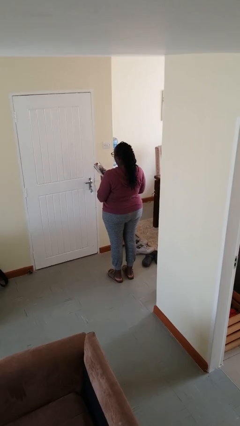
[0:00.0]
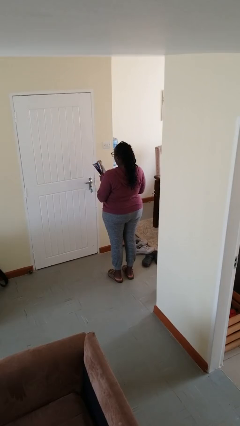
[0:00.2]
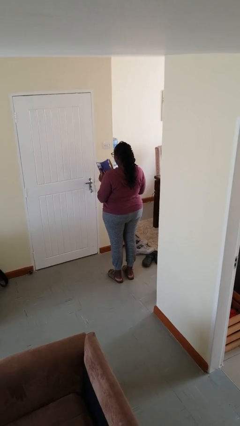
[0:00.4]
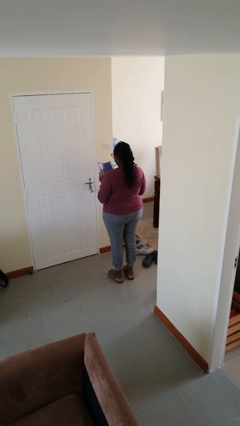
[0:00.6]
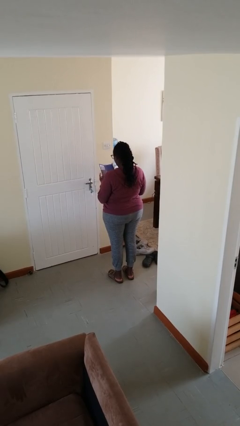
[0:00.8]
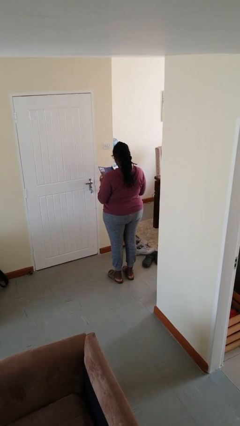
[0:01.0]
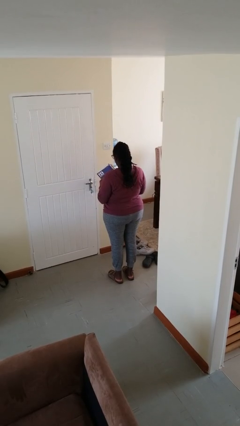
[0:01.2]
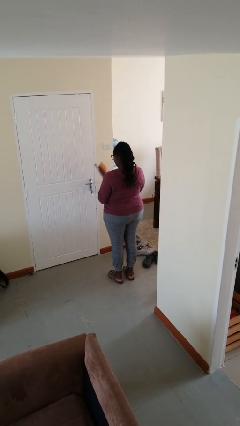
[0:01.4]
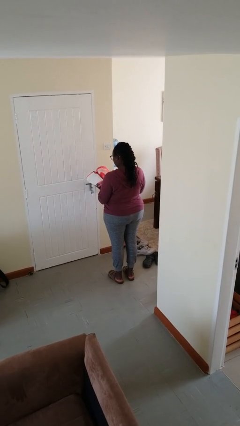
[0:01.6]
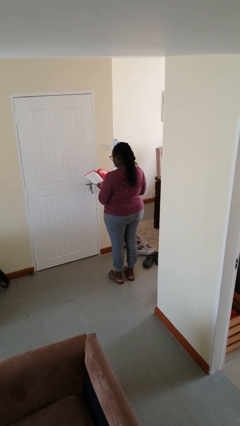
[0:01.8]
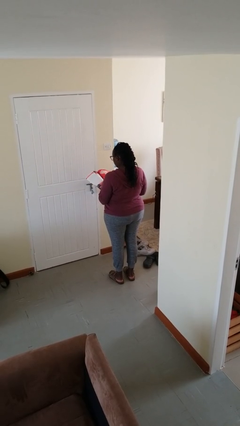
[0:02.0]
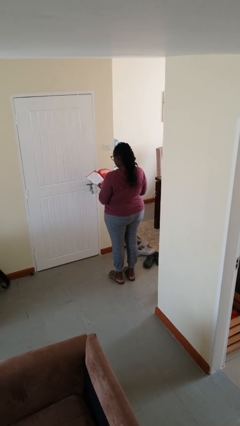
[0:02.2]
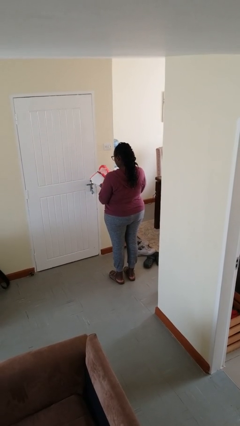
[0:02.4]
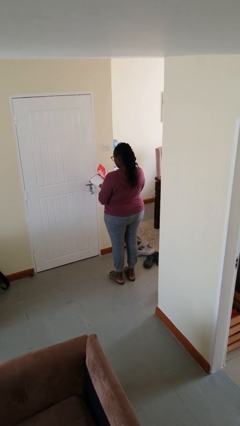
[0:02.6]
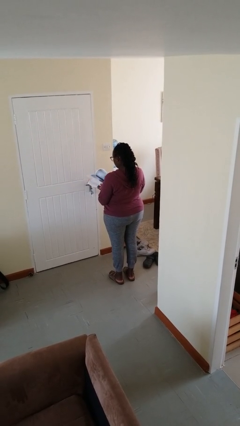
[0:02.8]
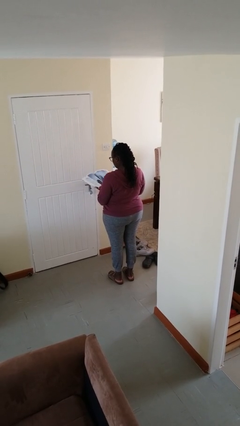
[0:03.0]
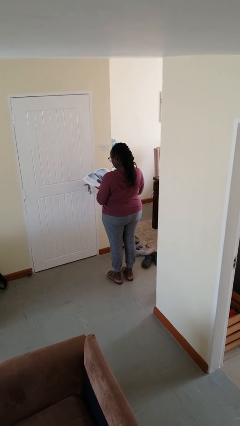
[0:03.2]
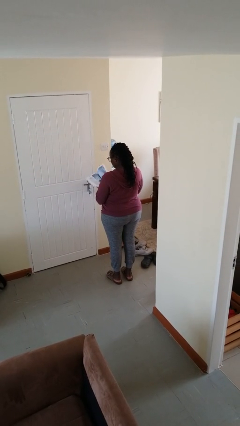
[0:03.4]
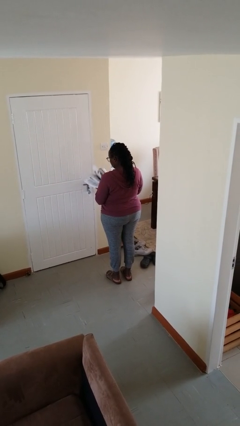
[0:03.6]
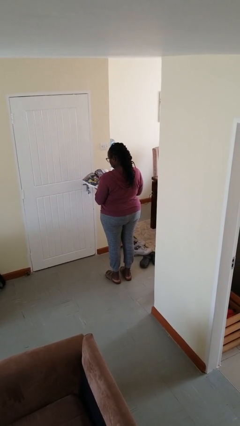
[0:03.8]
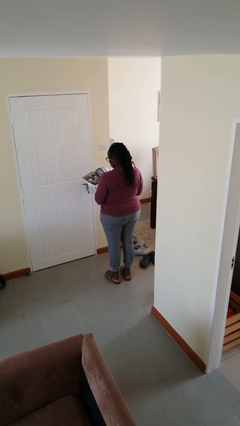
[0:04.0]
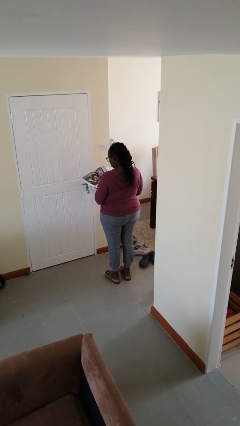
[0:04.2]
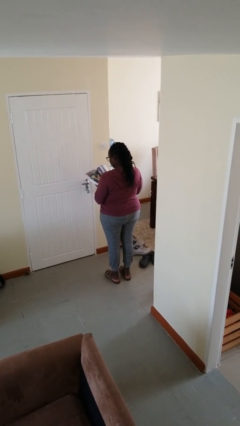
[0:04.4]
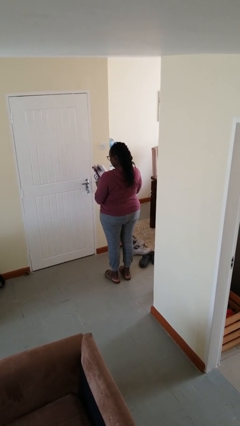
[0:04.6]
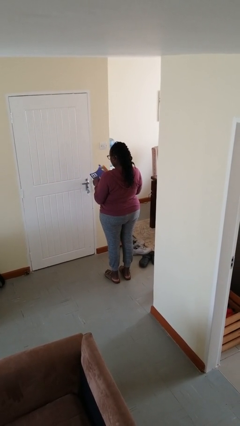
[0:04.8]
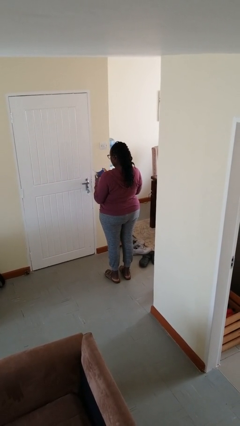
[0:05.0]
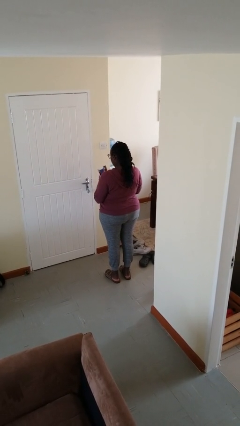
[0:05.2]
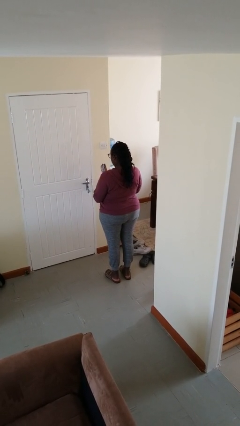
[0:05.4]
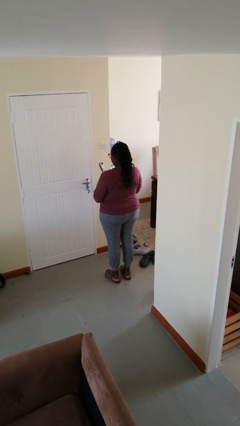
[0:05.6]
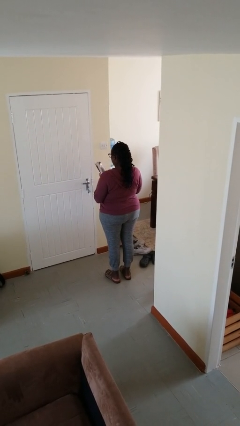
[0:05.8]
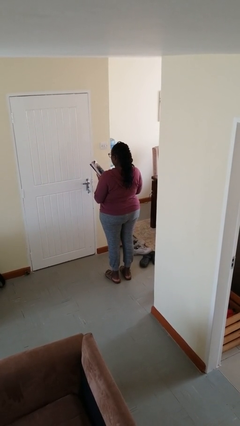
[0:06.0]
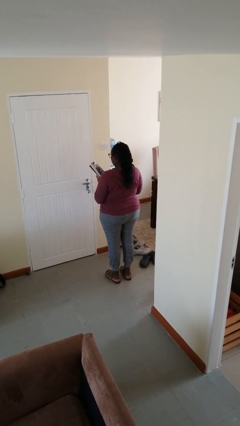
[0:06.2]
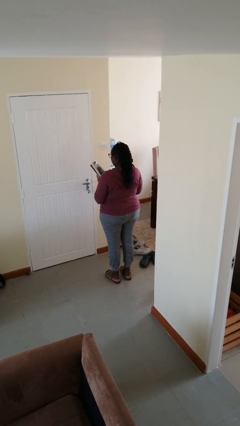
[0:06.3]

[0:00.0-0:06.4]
person reads magazine

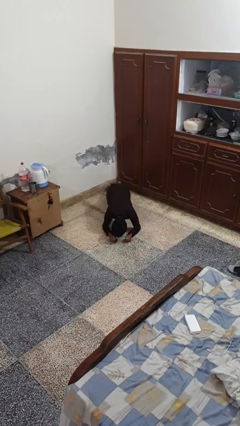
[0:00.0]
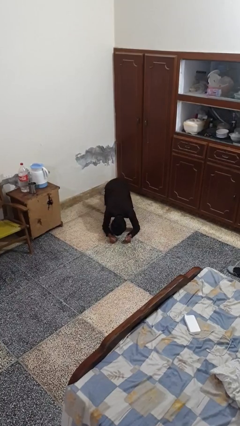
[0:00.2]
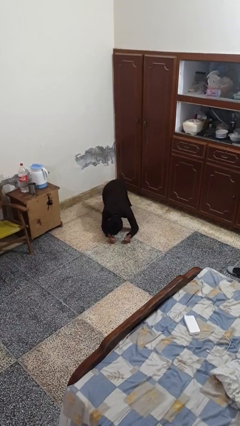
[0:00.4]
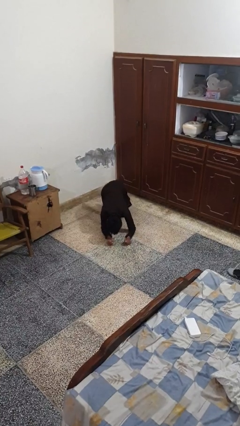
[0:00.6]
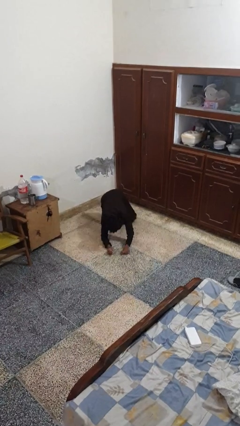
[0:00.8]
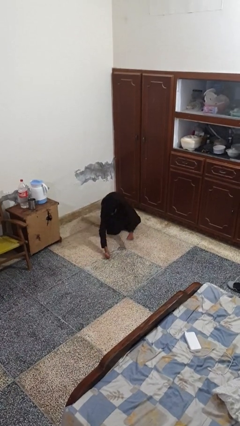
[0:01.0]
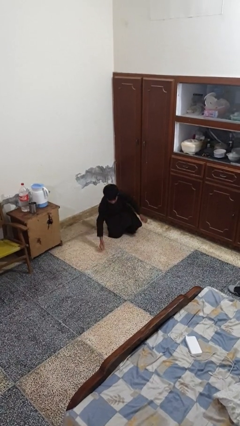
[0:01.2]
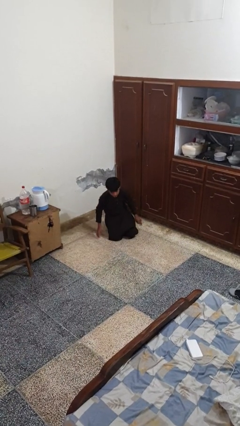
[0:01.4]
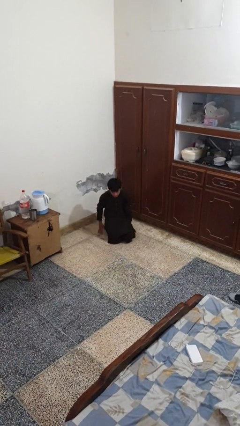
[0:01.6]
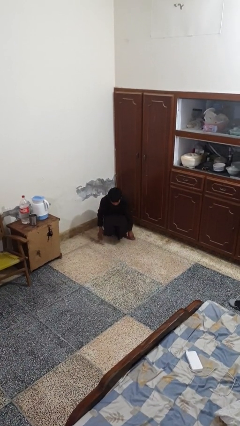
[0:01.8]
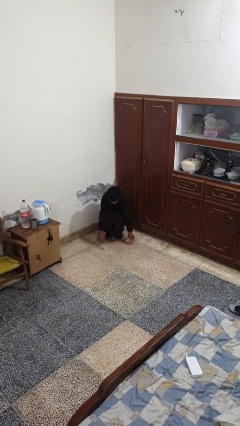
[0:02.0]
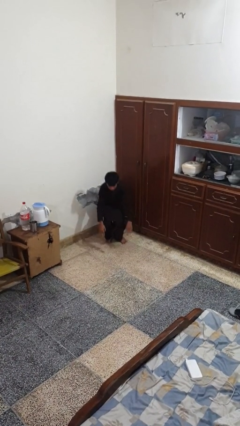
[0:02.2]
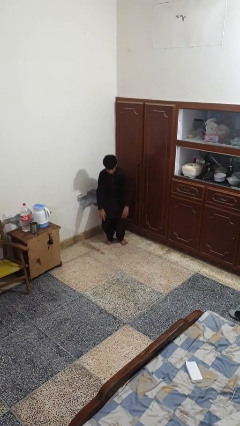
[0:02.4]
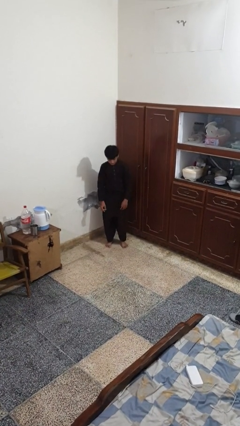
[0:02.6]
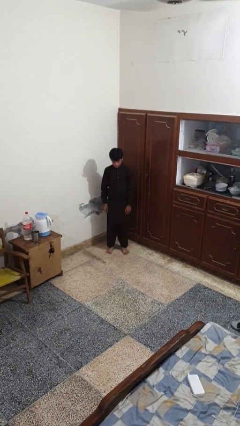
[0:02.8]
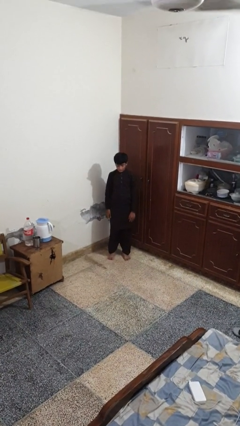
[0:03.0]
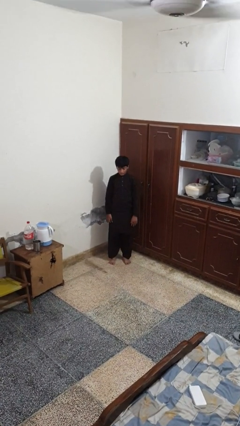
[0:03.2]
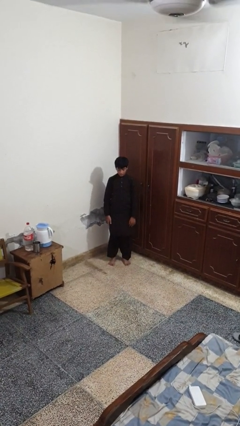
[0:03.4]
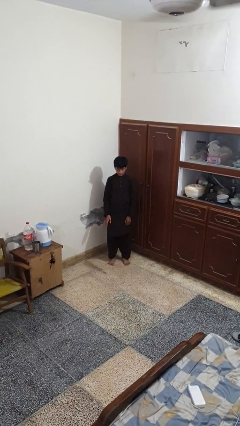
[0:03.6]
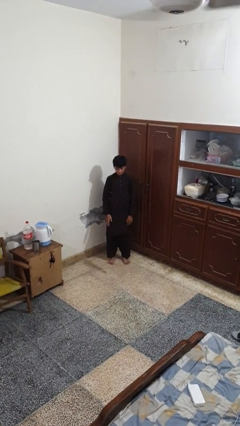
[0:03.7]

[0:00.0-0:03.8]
person stands up from floor

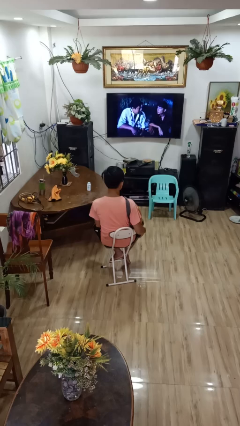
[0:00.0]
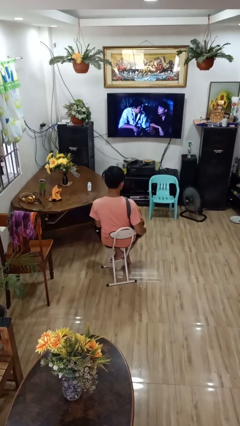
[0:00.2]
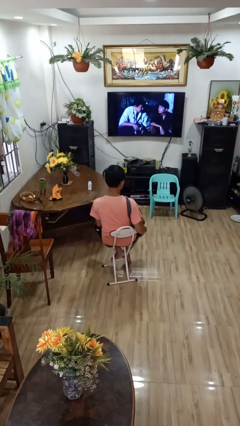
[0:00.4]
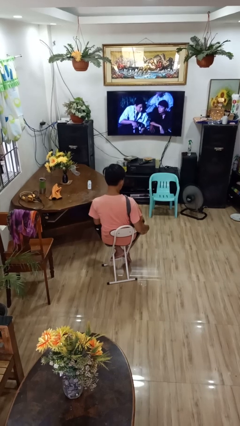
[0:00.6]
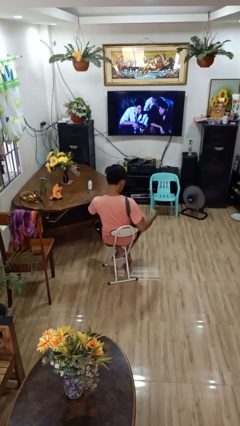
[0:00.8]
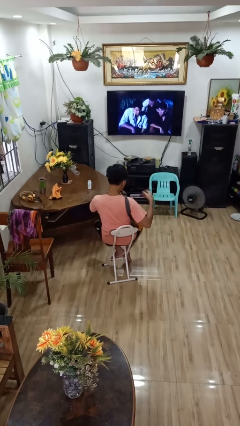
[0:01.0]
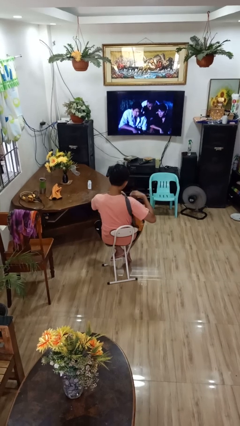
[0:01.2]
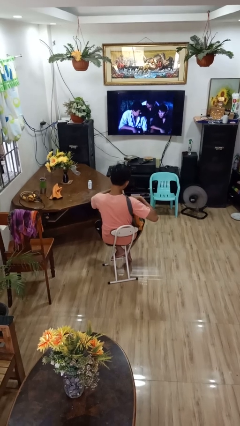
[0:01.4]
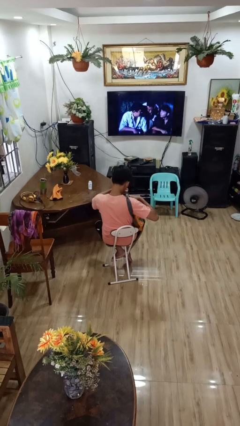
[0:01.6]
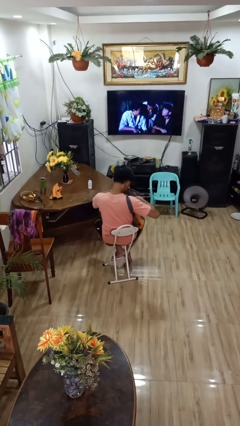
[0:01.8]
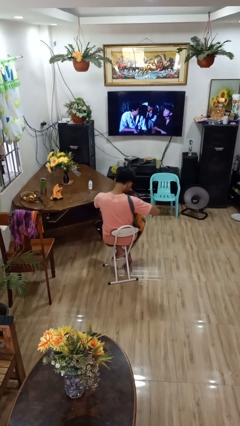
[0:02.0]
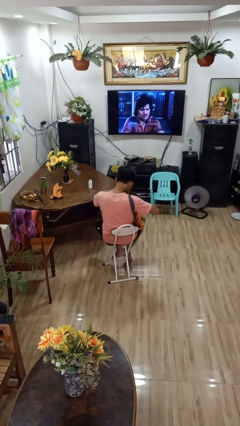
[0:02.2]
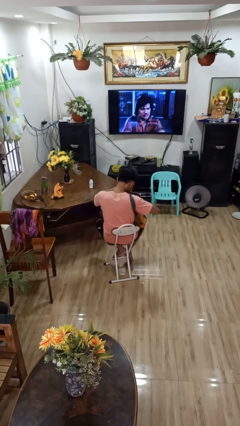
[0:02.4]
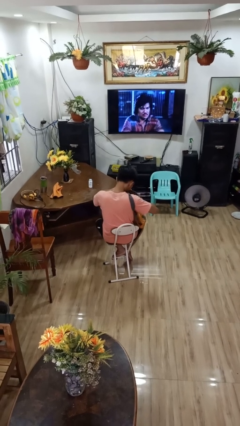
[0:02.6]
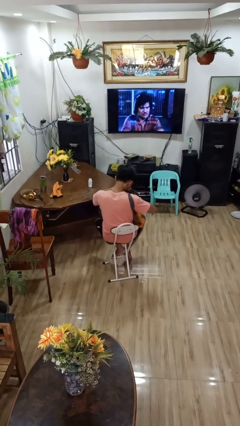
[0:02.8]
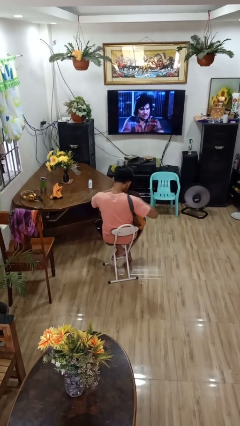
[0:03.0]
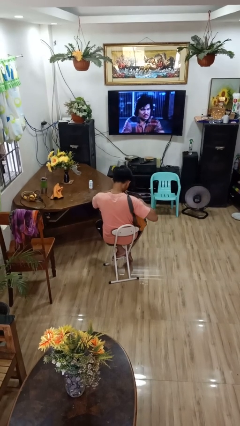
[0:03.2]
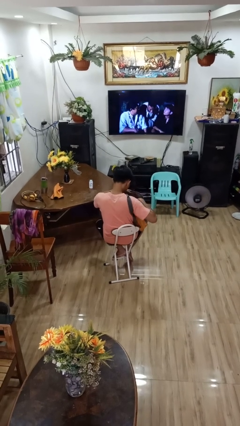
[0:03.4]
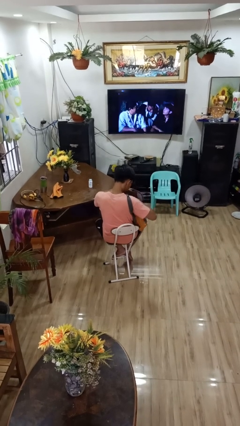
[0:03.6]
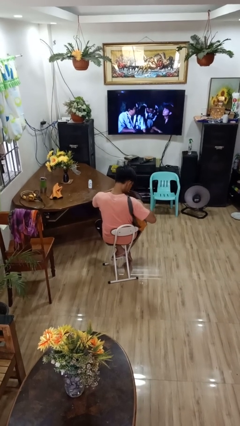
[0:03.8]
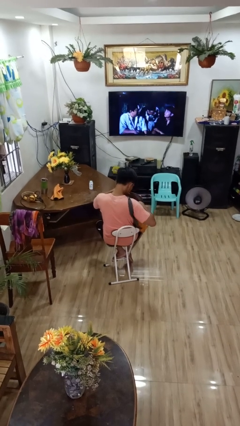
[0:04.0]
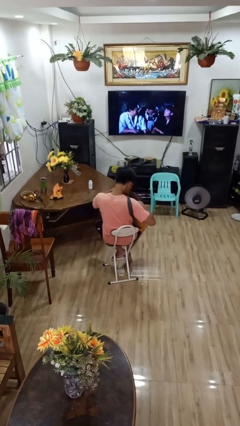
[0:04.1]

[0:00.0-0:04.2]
person searches in backpack

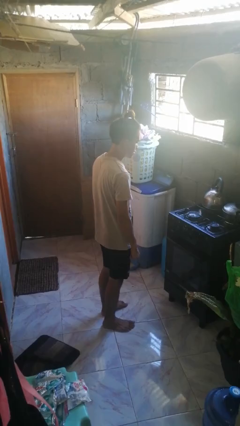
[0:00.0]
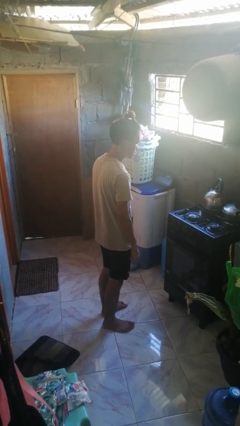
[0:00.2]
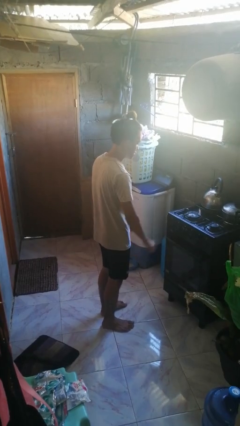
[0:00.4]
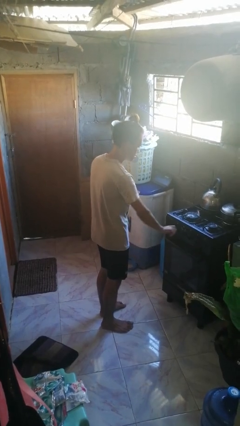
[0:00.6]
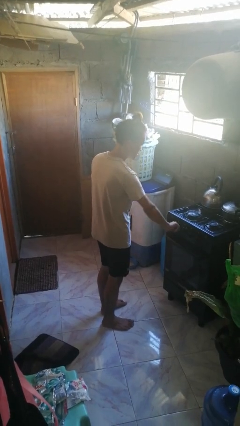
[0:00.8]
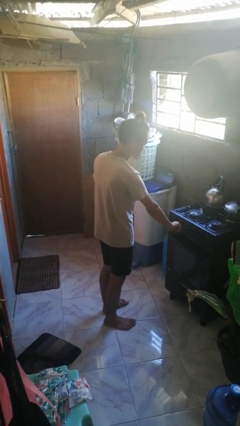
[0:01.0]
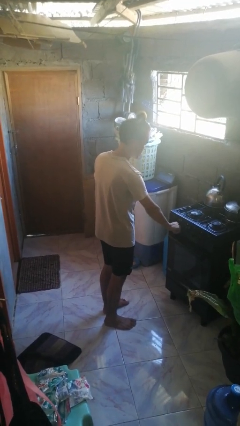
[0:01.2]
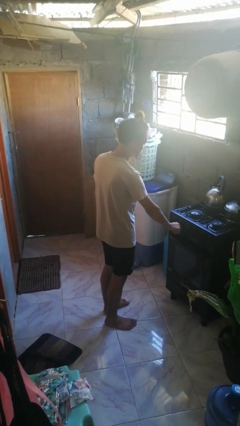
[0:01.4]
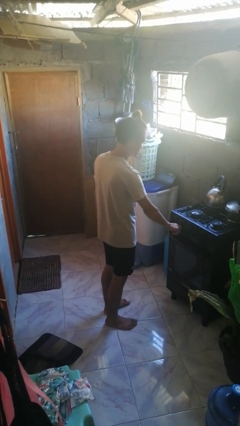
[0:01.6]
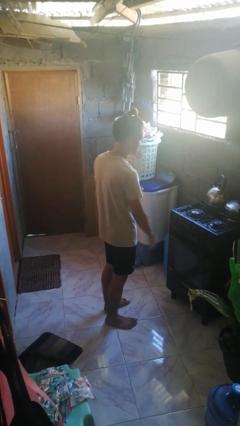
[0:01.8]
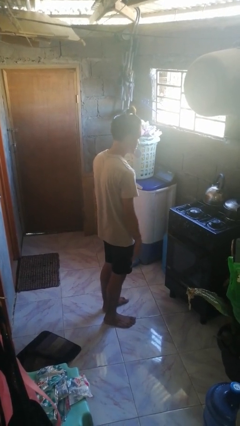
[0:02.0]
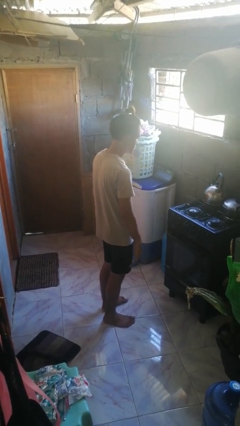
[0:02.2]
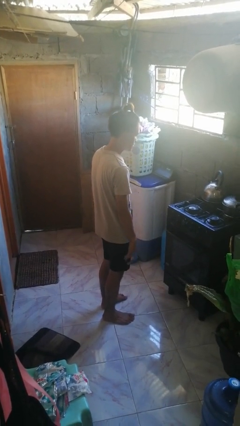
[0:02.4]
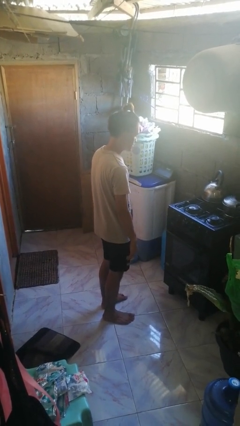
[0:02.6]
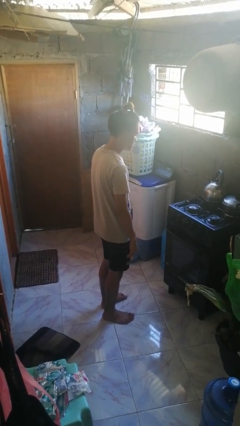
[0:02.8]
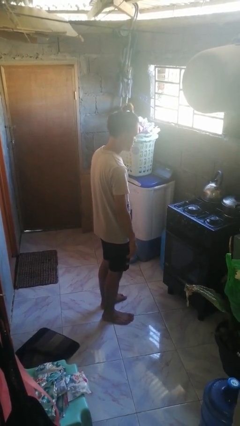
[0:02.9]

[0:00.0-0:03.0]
person turns off stovetop
